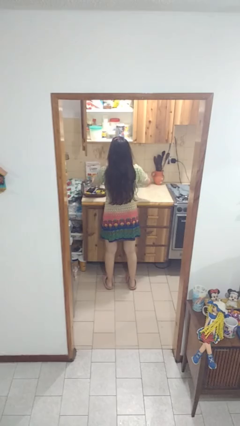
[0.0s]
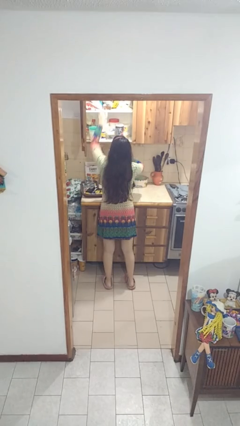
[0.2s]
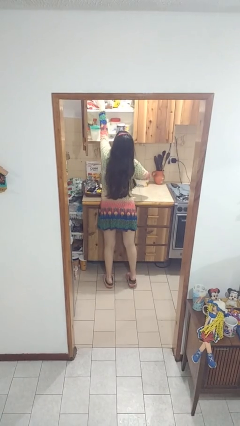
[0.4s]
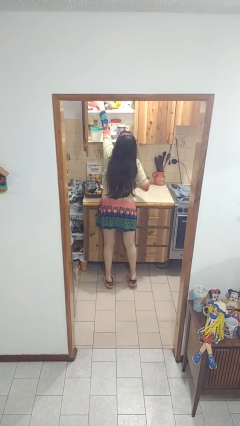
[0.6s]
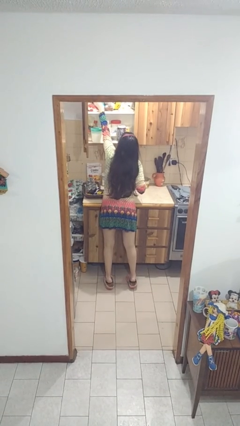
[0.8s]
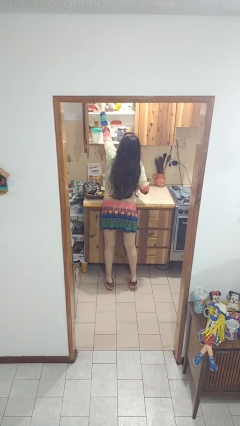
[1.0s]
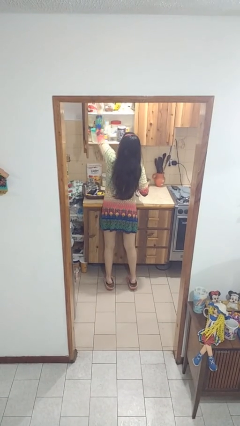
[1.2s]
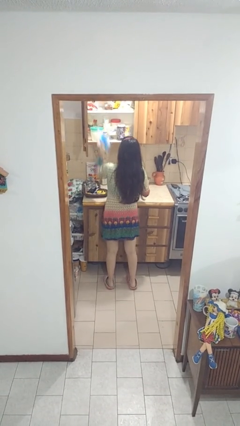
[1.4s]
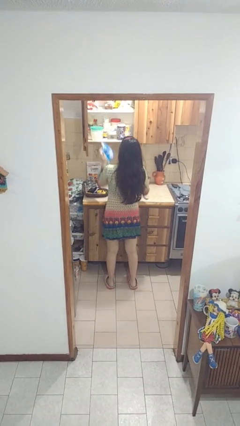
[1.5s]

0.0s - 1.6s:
person takes object from cabinet

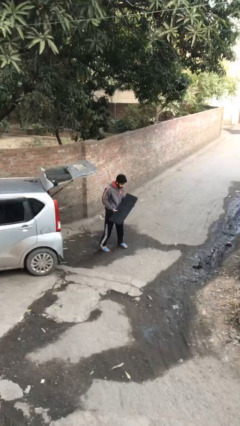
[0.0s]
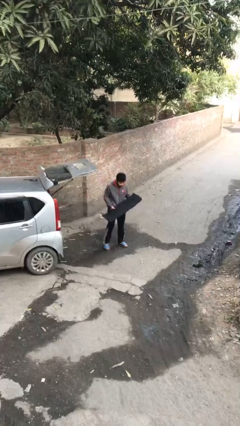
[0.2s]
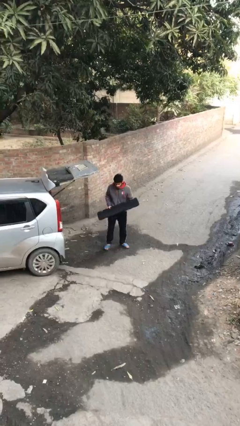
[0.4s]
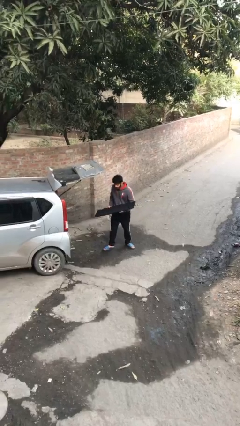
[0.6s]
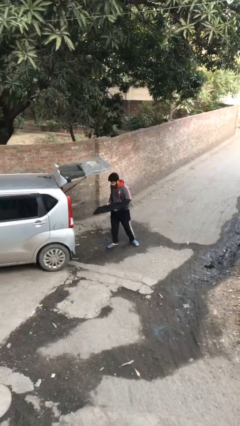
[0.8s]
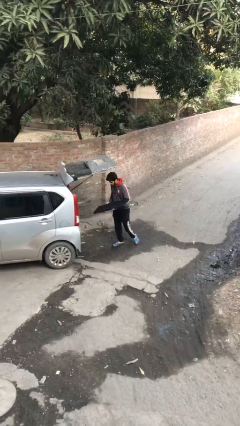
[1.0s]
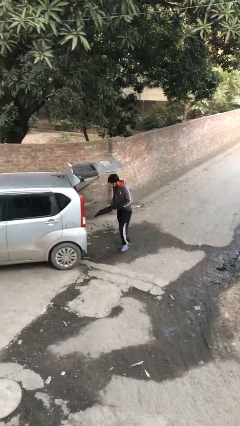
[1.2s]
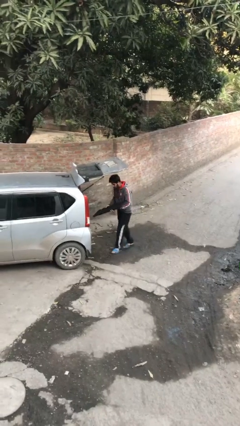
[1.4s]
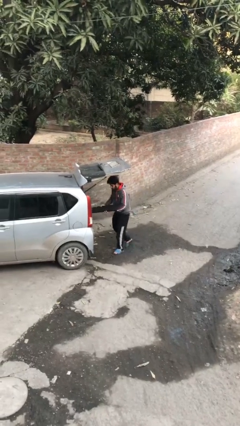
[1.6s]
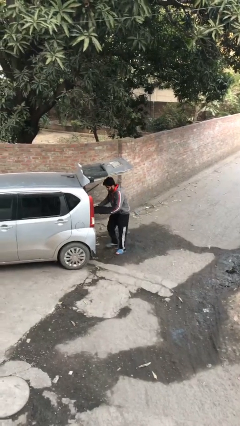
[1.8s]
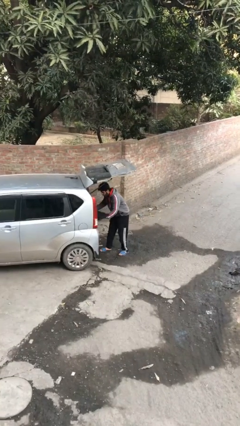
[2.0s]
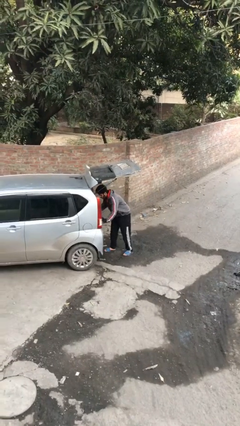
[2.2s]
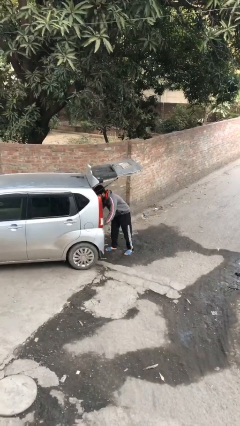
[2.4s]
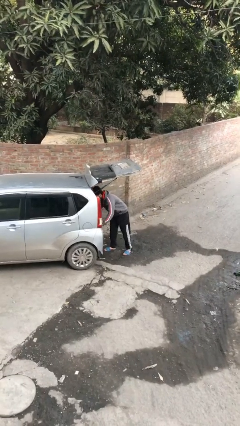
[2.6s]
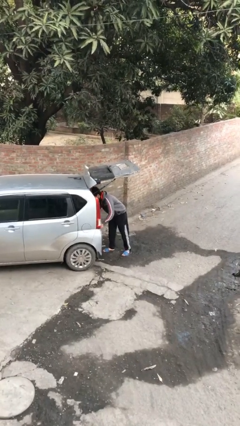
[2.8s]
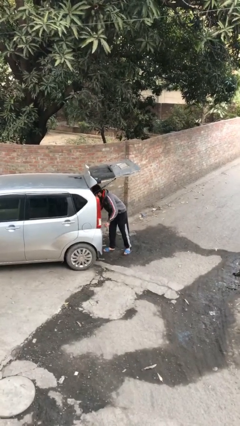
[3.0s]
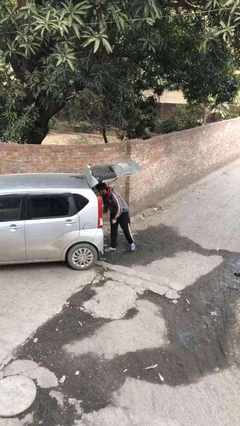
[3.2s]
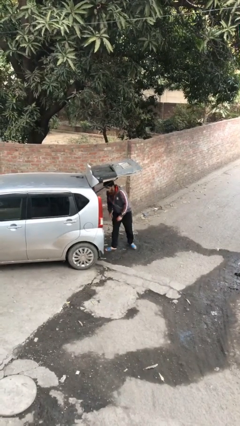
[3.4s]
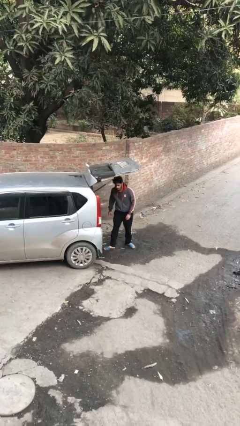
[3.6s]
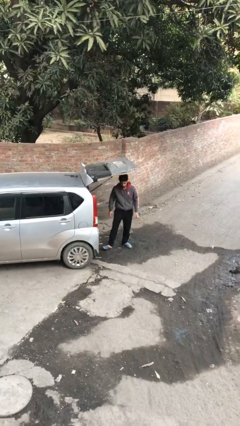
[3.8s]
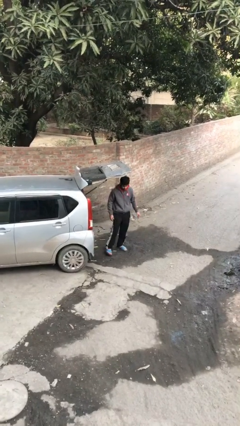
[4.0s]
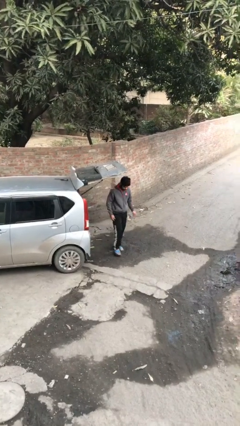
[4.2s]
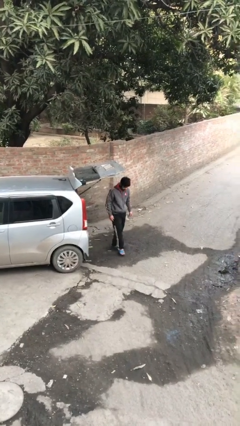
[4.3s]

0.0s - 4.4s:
person loads car

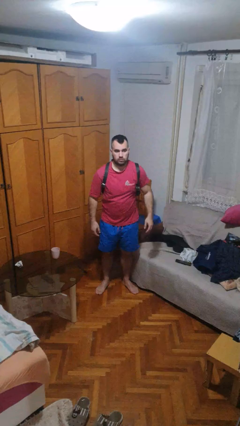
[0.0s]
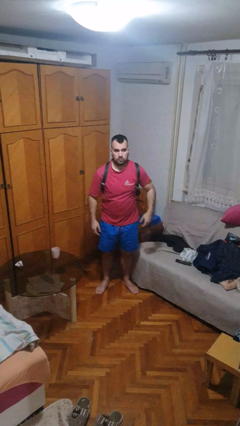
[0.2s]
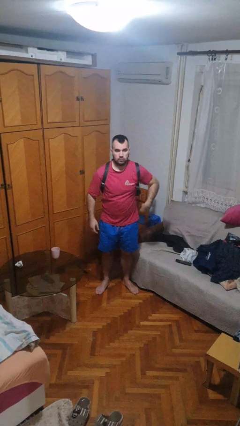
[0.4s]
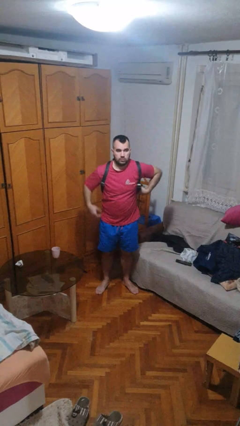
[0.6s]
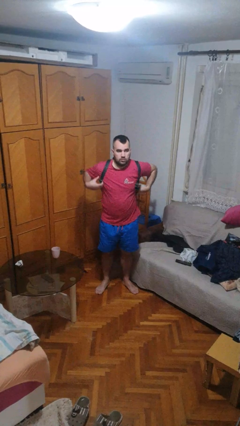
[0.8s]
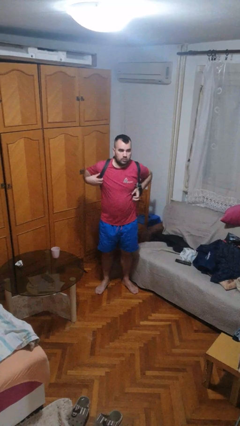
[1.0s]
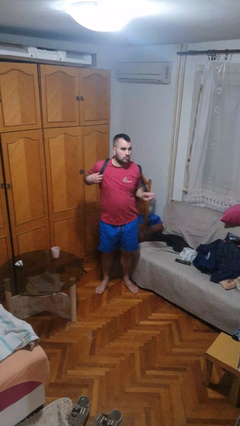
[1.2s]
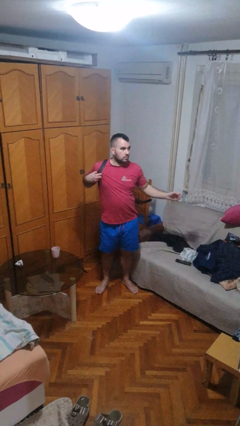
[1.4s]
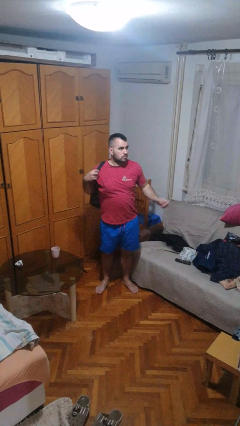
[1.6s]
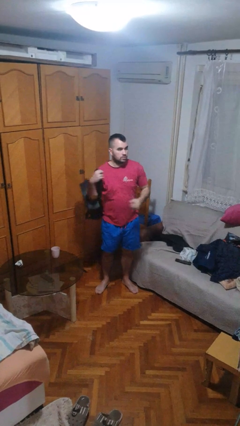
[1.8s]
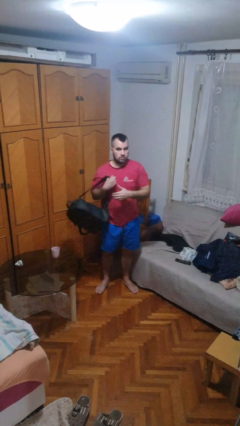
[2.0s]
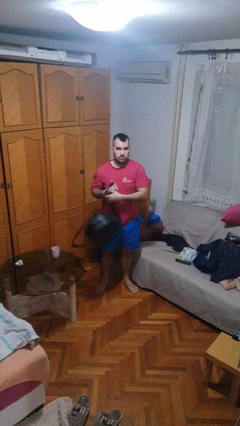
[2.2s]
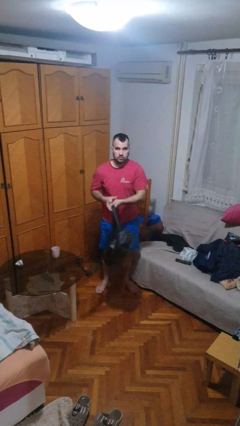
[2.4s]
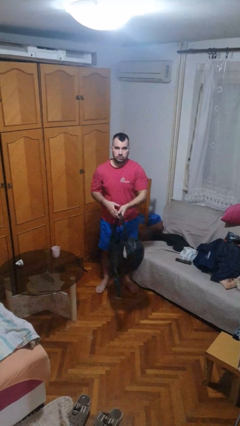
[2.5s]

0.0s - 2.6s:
person takes off backpack

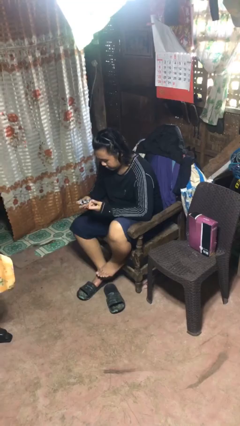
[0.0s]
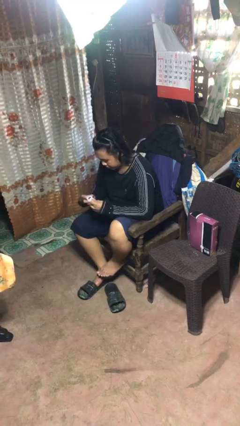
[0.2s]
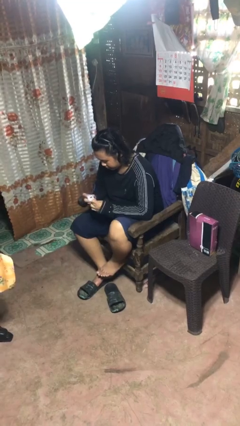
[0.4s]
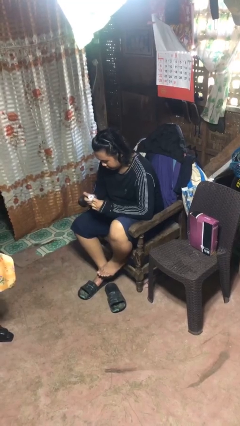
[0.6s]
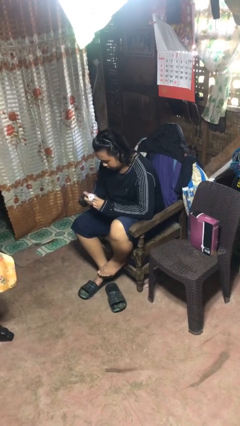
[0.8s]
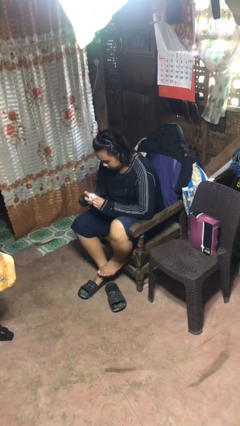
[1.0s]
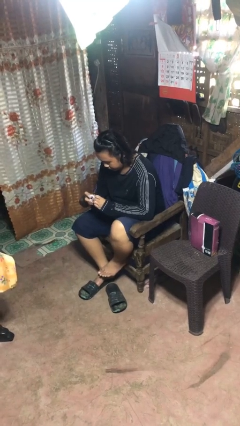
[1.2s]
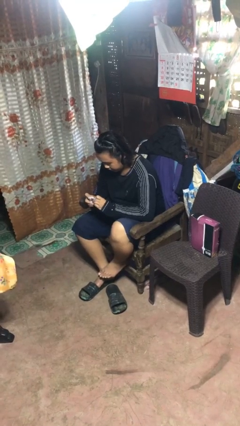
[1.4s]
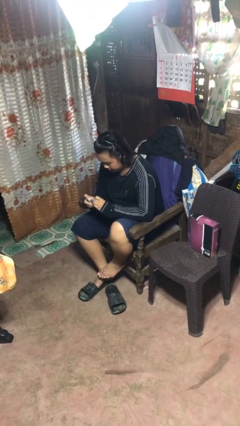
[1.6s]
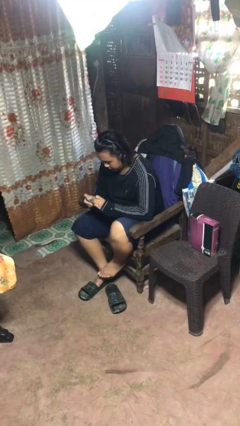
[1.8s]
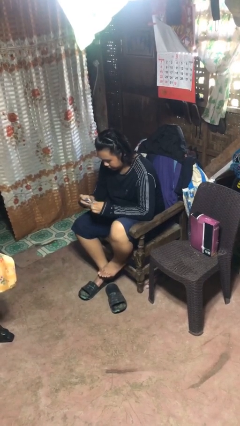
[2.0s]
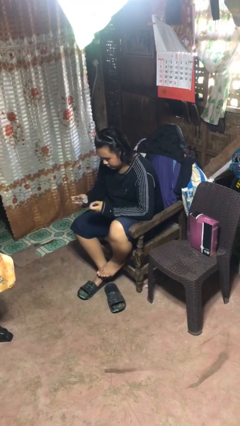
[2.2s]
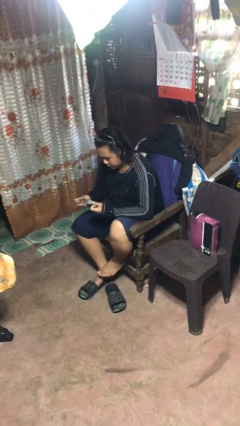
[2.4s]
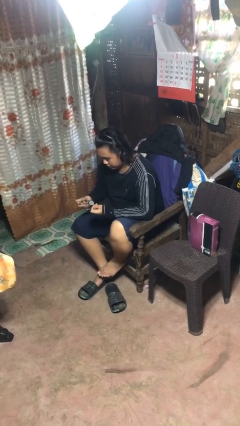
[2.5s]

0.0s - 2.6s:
person files fingernails

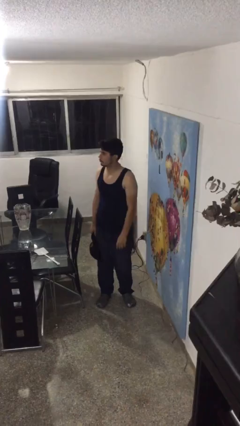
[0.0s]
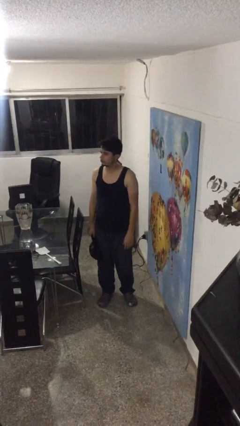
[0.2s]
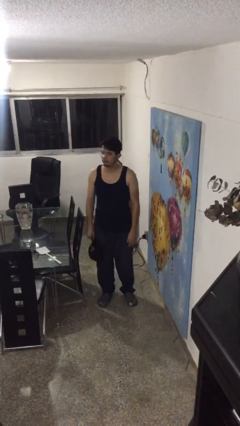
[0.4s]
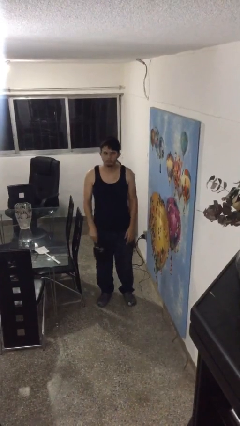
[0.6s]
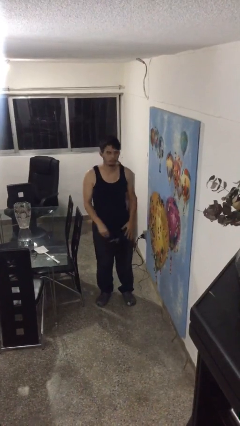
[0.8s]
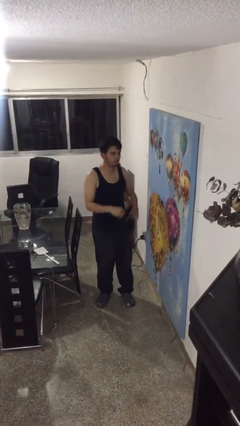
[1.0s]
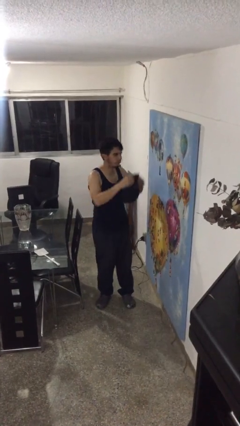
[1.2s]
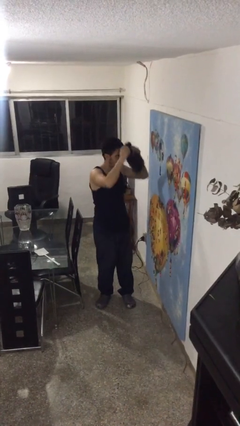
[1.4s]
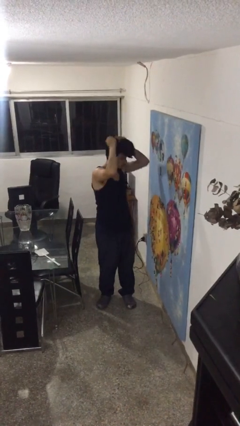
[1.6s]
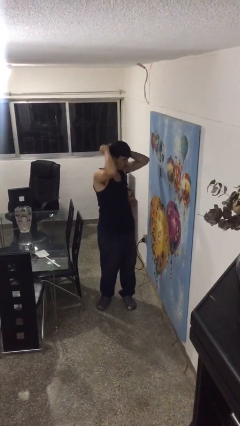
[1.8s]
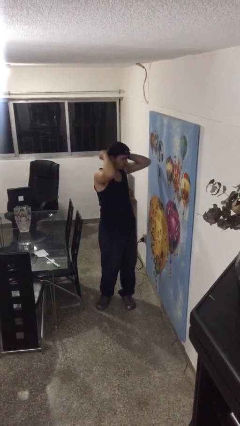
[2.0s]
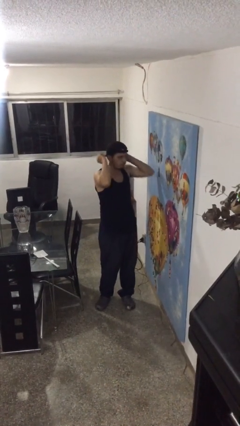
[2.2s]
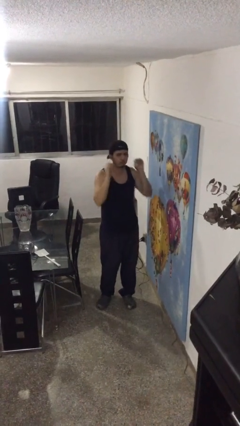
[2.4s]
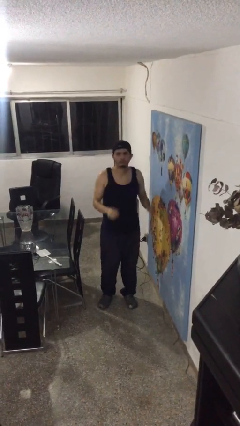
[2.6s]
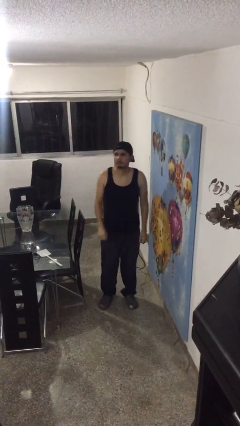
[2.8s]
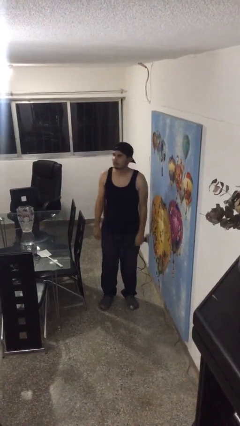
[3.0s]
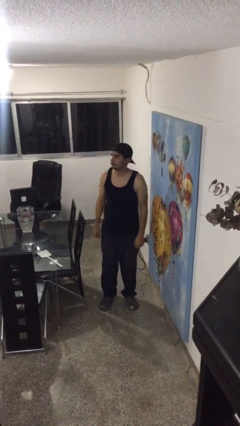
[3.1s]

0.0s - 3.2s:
person puts on hat

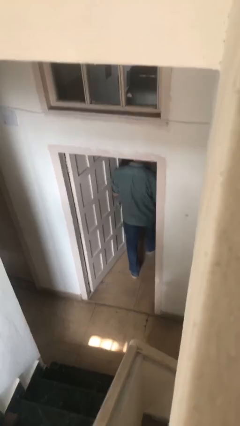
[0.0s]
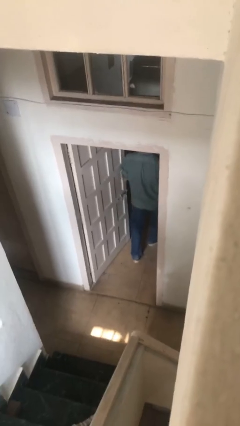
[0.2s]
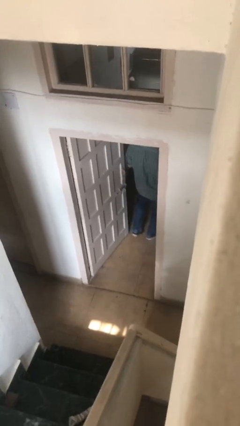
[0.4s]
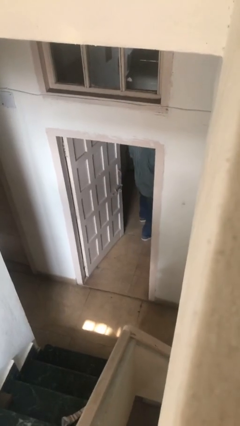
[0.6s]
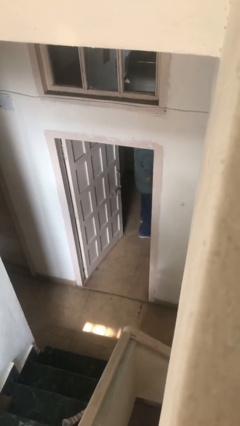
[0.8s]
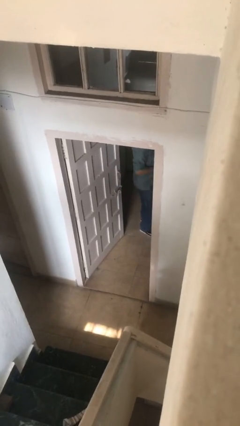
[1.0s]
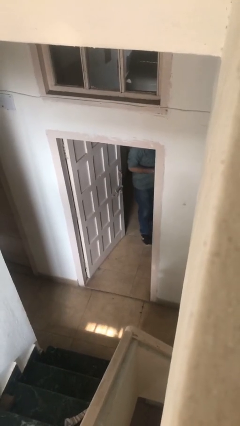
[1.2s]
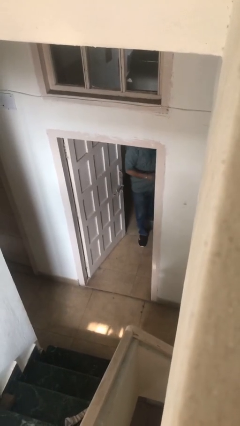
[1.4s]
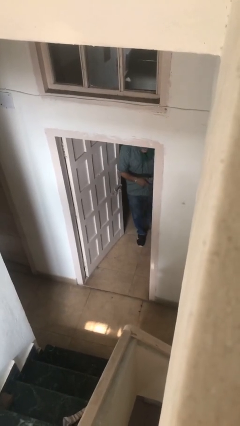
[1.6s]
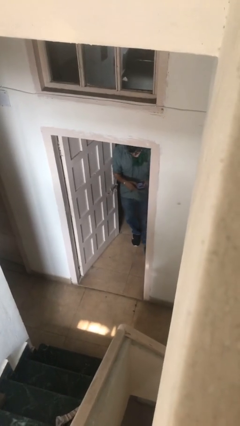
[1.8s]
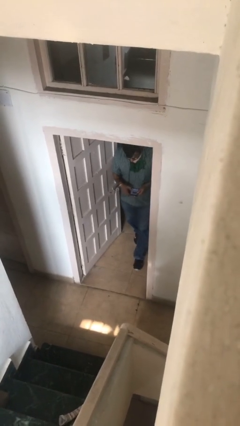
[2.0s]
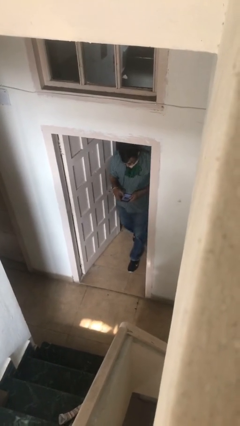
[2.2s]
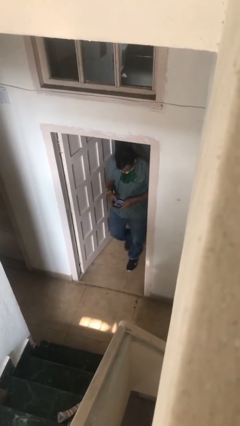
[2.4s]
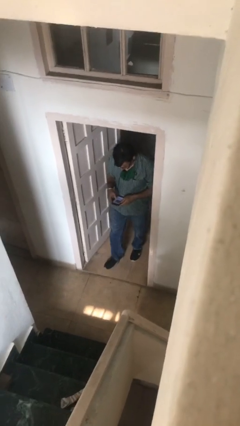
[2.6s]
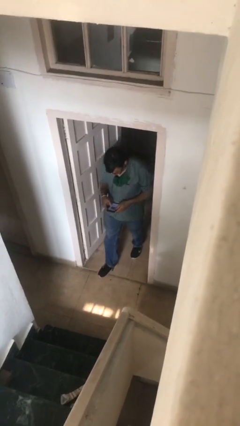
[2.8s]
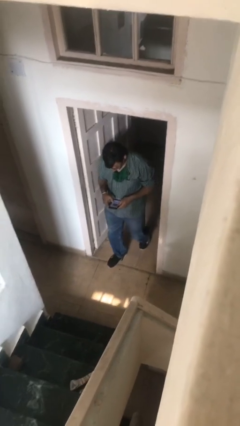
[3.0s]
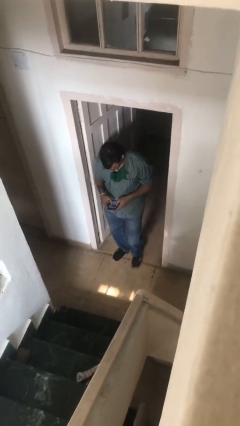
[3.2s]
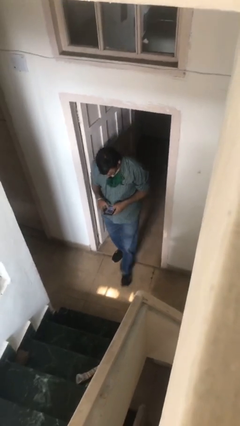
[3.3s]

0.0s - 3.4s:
person enters scene through structure
